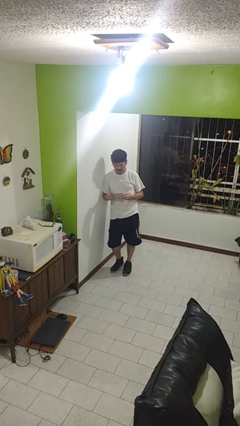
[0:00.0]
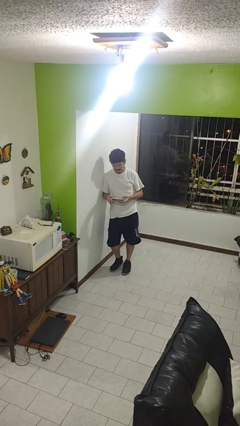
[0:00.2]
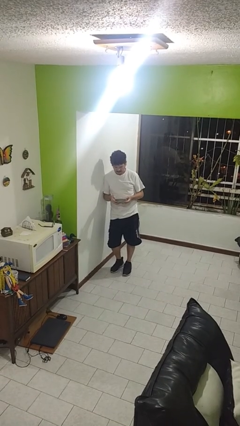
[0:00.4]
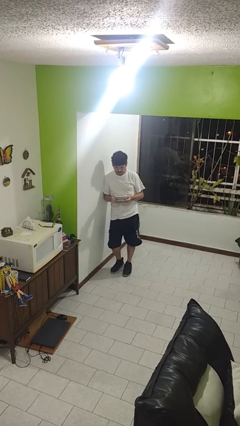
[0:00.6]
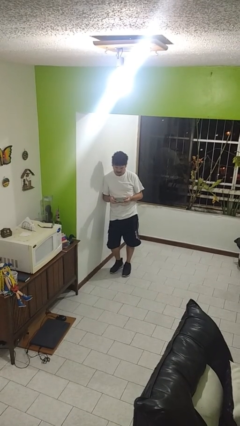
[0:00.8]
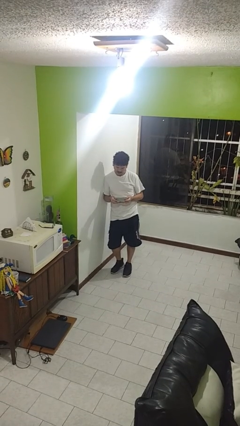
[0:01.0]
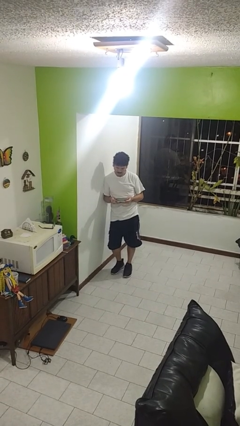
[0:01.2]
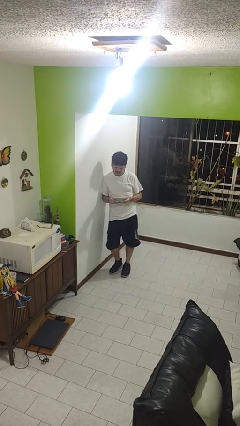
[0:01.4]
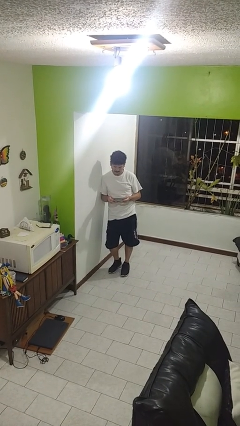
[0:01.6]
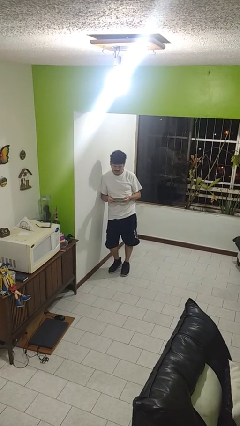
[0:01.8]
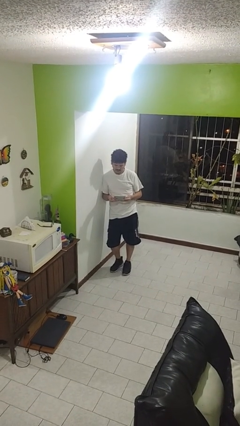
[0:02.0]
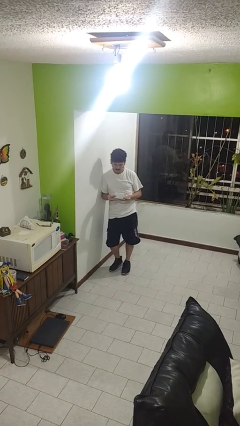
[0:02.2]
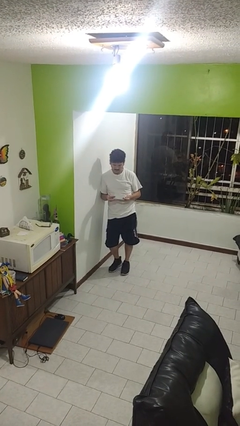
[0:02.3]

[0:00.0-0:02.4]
person interacts with handheld game

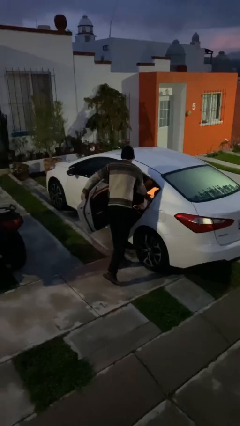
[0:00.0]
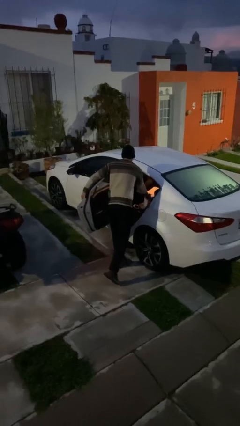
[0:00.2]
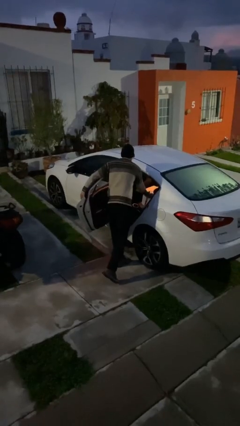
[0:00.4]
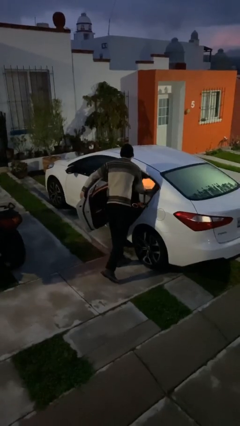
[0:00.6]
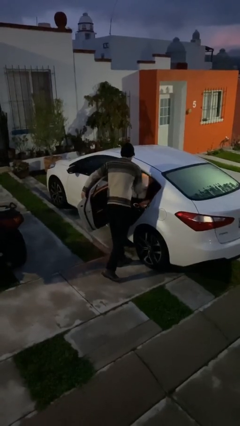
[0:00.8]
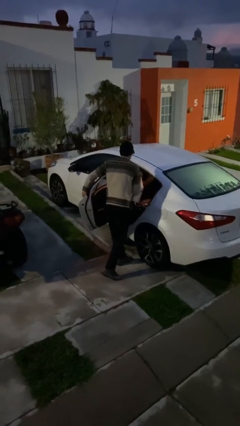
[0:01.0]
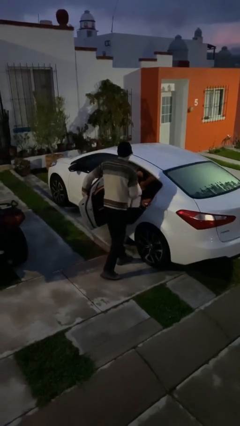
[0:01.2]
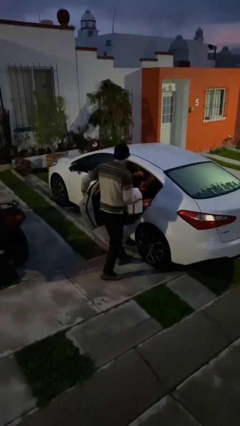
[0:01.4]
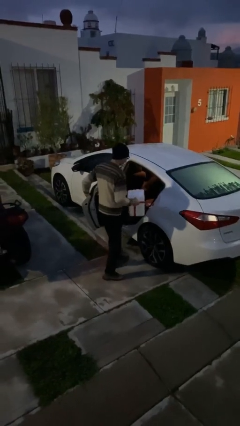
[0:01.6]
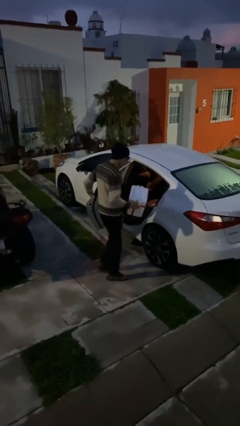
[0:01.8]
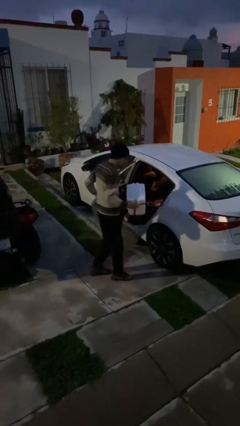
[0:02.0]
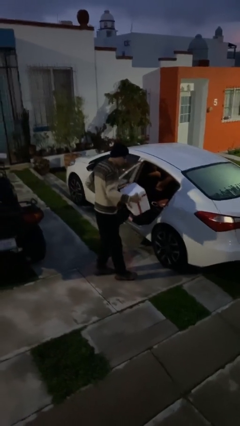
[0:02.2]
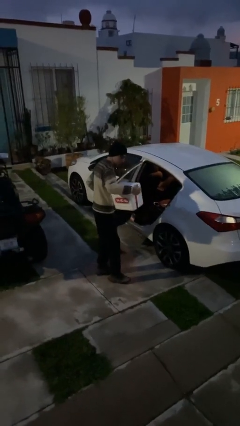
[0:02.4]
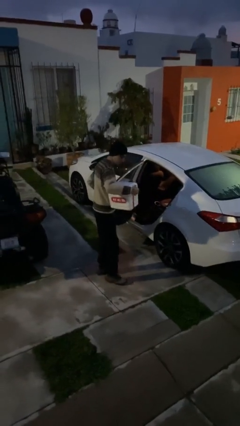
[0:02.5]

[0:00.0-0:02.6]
person unloads car

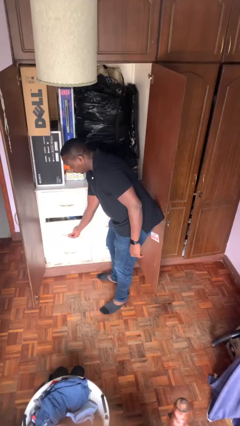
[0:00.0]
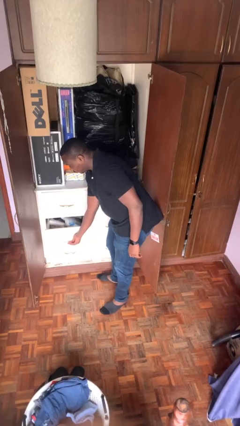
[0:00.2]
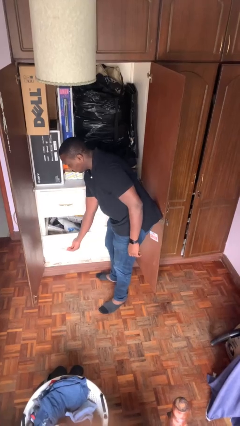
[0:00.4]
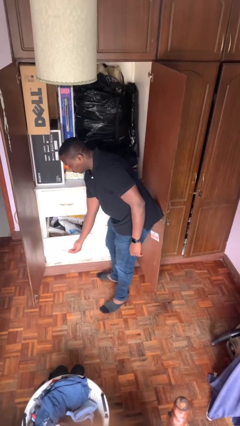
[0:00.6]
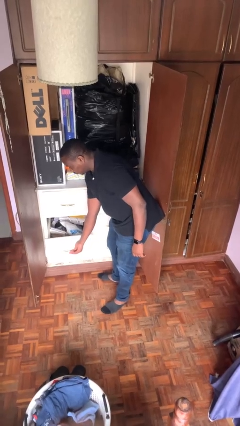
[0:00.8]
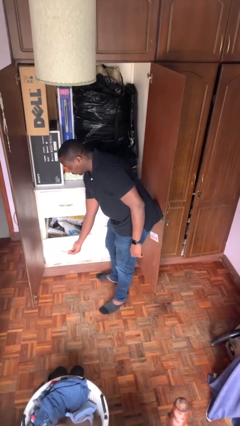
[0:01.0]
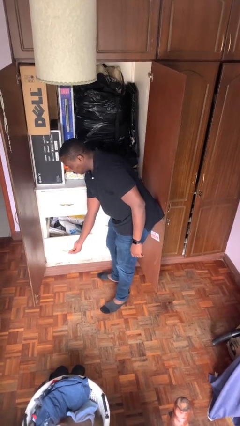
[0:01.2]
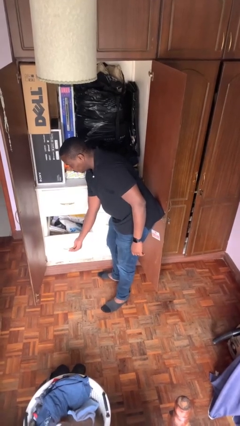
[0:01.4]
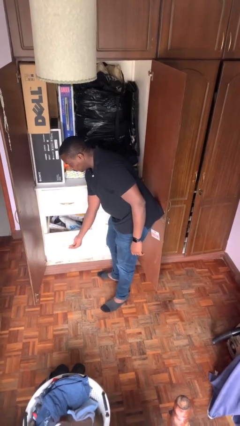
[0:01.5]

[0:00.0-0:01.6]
person opens dresser drawer

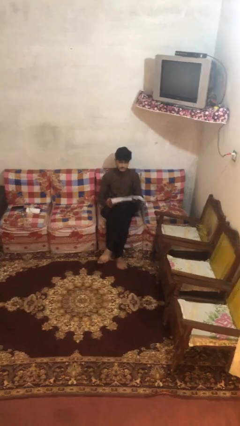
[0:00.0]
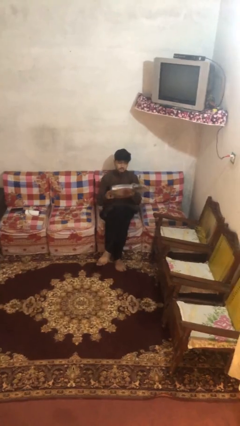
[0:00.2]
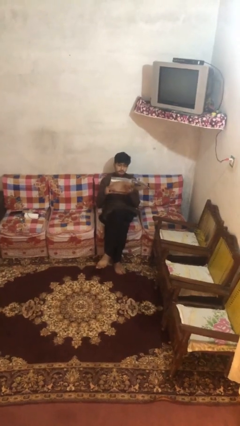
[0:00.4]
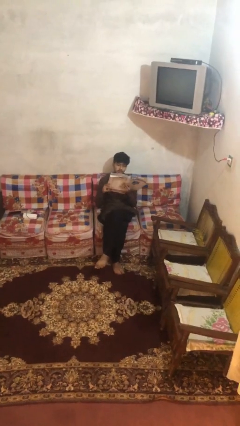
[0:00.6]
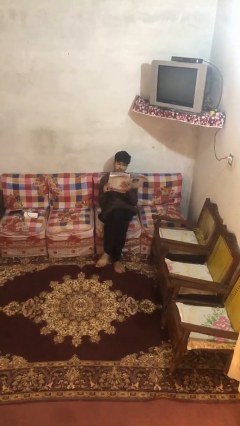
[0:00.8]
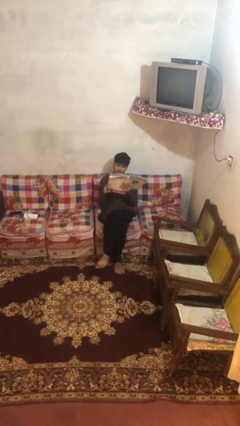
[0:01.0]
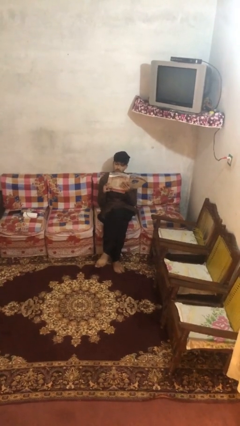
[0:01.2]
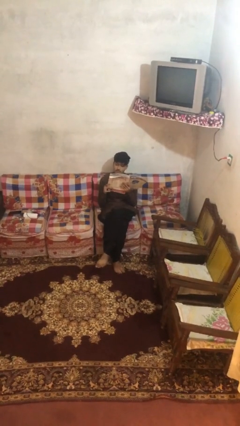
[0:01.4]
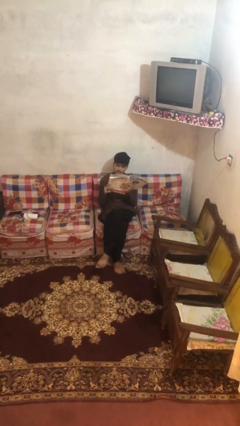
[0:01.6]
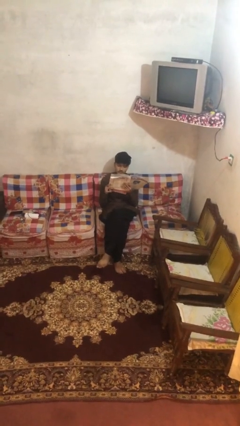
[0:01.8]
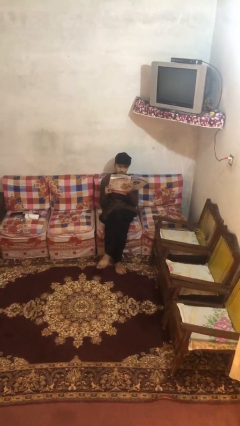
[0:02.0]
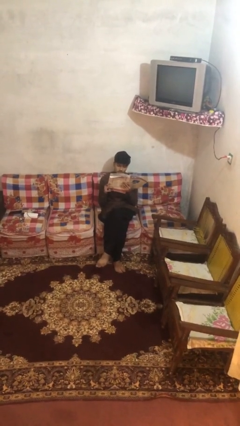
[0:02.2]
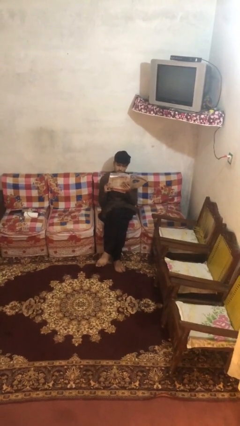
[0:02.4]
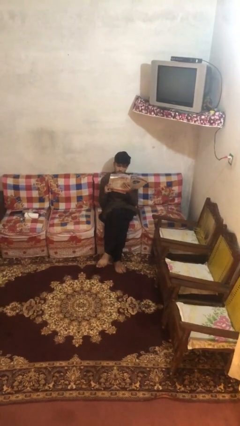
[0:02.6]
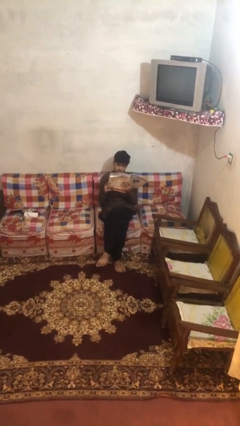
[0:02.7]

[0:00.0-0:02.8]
person reads document

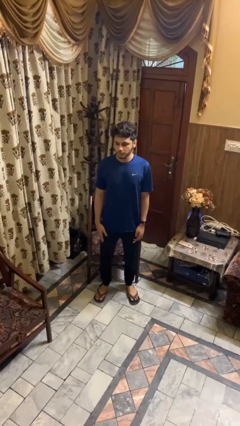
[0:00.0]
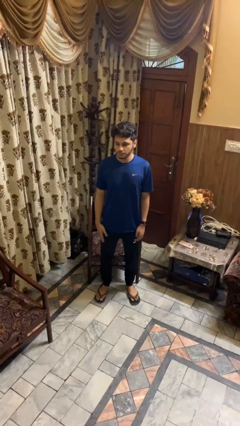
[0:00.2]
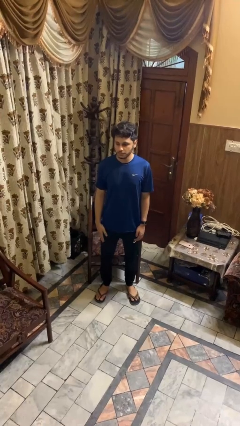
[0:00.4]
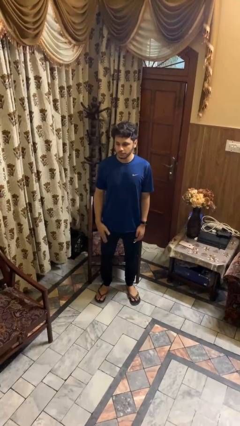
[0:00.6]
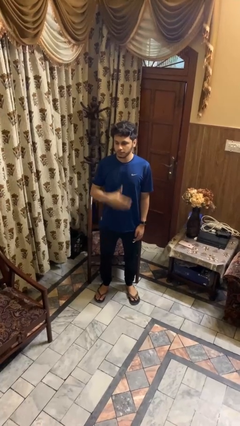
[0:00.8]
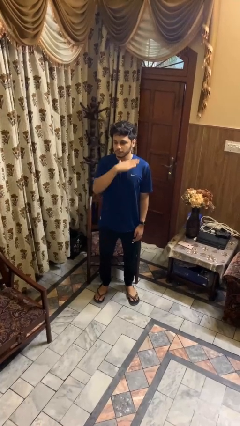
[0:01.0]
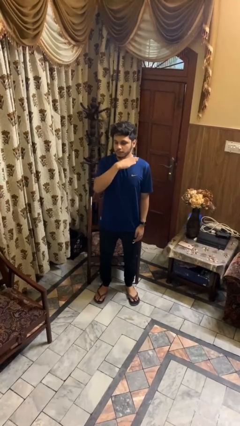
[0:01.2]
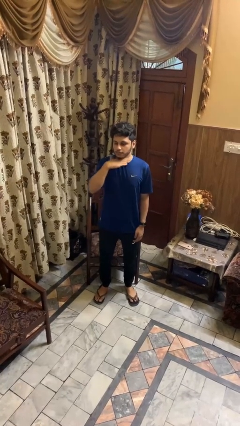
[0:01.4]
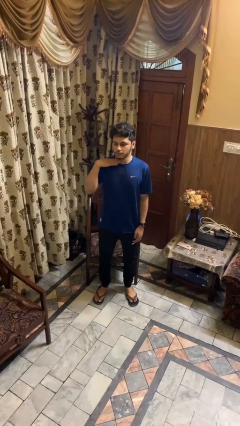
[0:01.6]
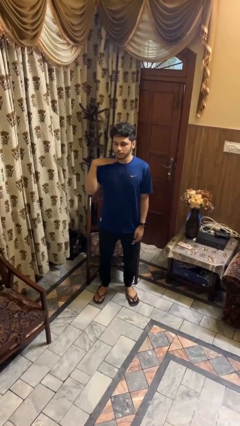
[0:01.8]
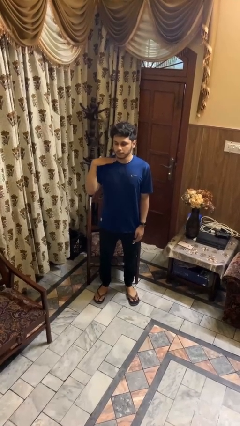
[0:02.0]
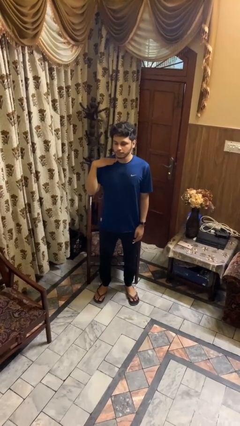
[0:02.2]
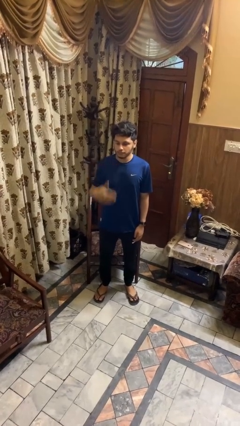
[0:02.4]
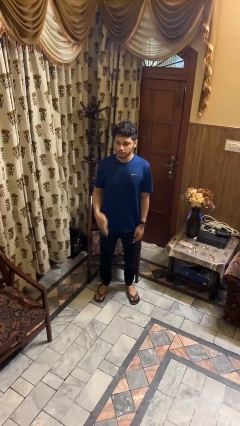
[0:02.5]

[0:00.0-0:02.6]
person gestures cut

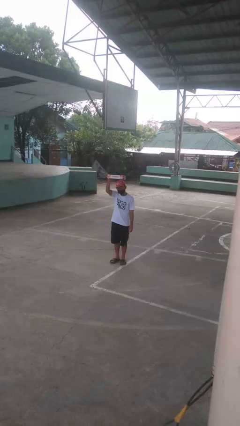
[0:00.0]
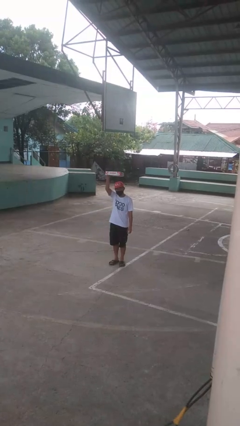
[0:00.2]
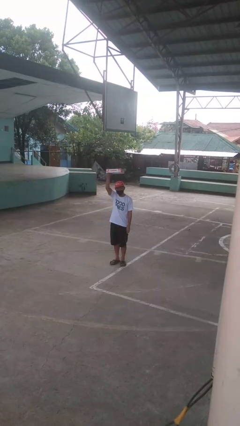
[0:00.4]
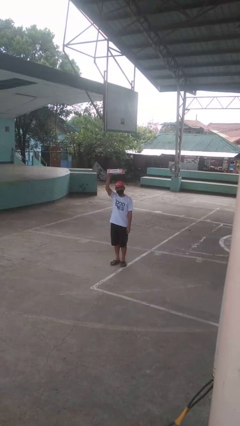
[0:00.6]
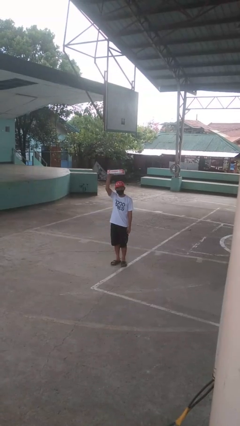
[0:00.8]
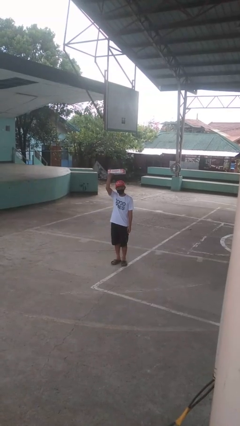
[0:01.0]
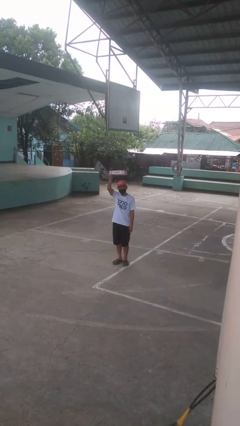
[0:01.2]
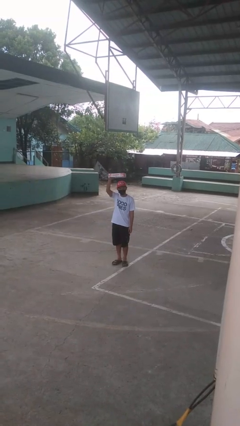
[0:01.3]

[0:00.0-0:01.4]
person holds object above head

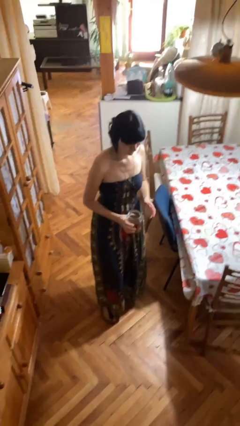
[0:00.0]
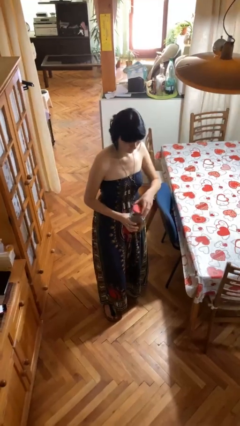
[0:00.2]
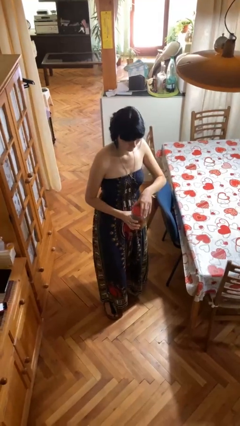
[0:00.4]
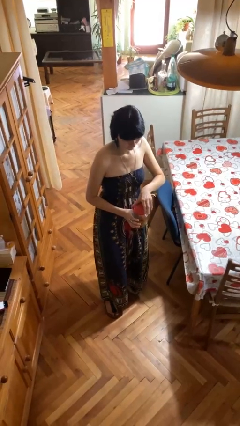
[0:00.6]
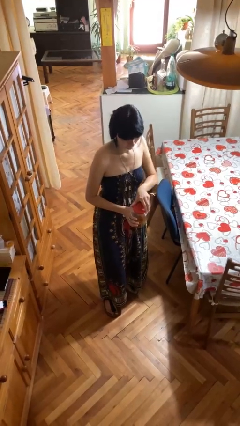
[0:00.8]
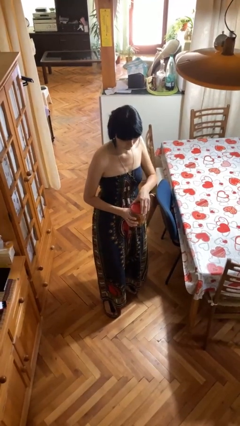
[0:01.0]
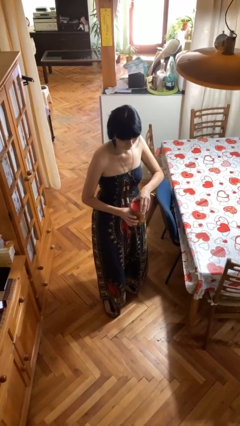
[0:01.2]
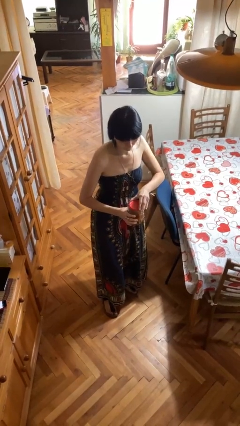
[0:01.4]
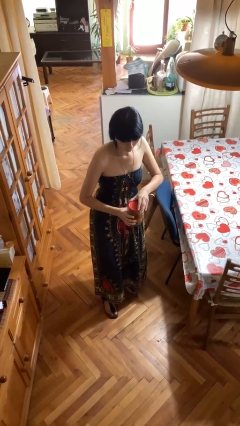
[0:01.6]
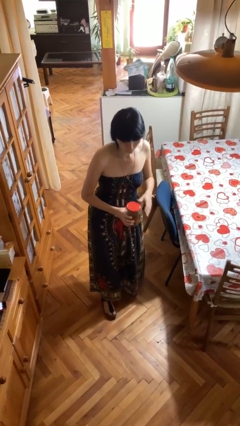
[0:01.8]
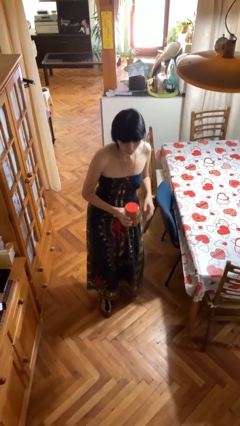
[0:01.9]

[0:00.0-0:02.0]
person closes jar

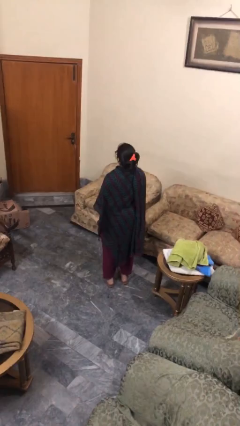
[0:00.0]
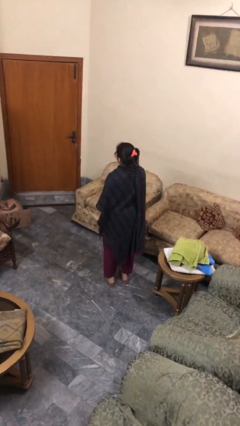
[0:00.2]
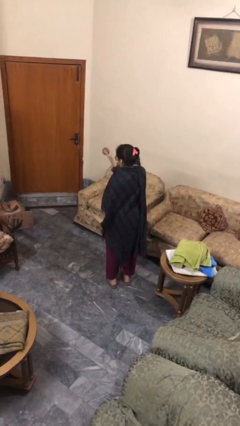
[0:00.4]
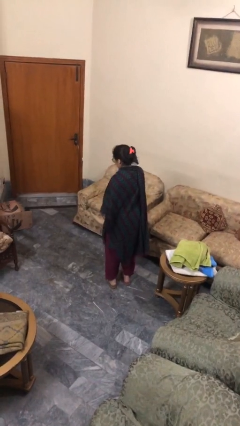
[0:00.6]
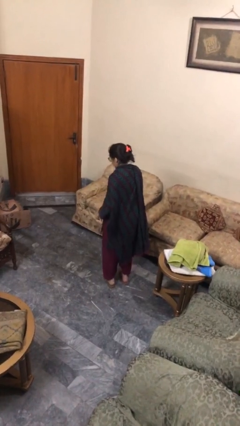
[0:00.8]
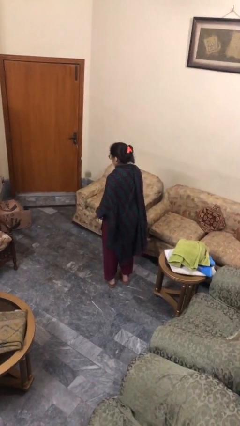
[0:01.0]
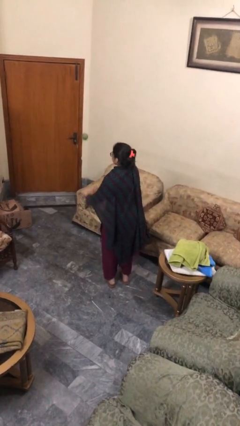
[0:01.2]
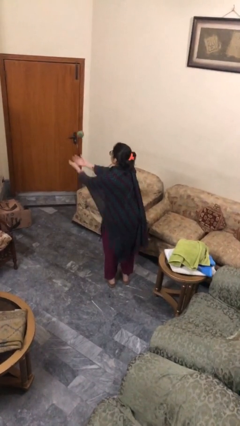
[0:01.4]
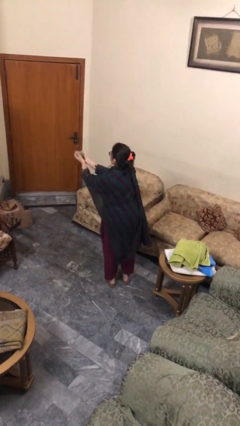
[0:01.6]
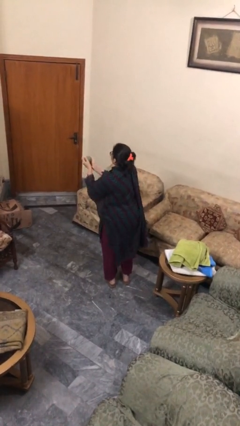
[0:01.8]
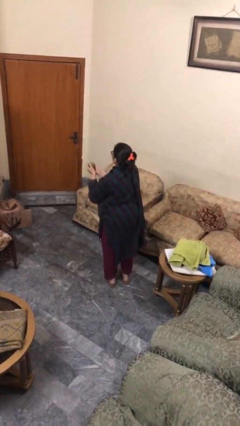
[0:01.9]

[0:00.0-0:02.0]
person bounces ball on floor
